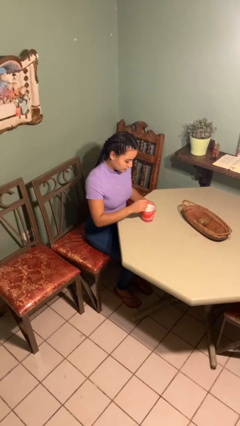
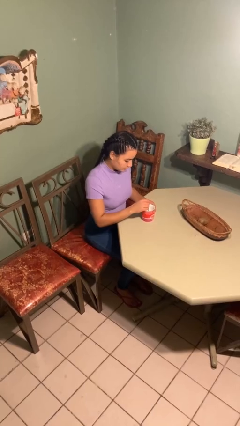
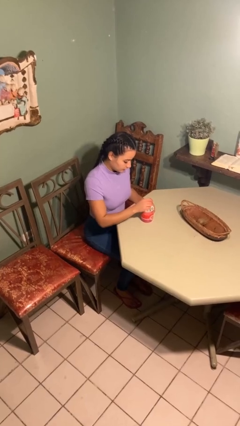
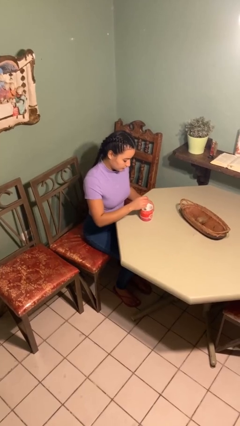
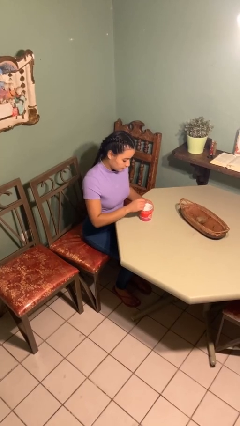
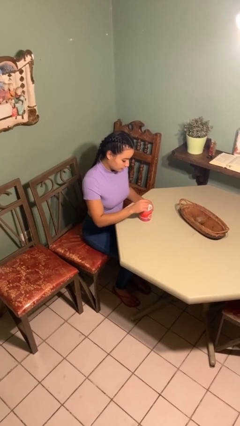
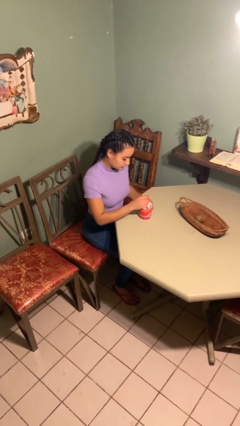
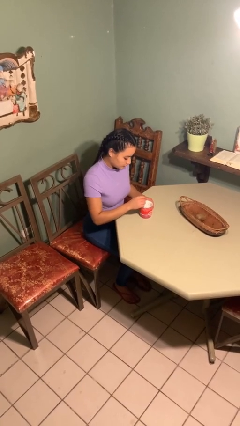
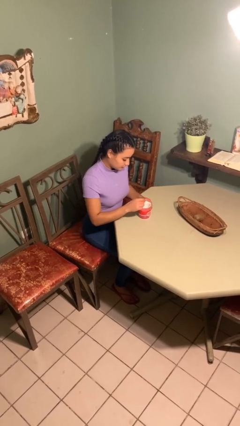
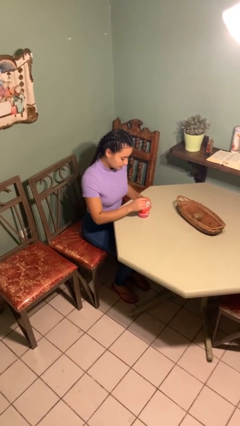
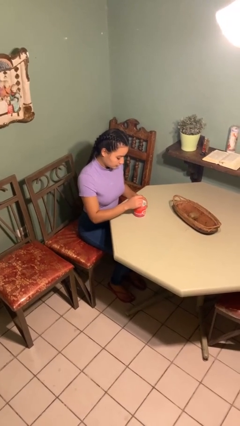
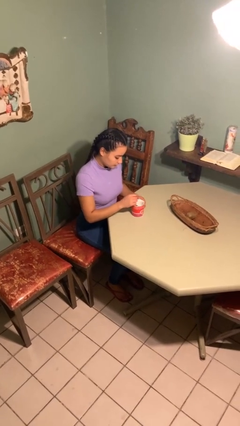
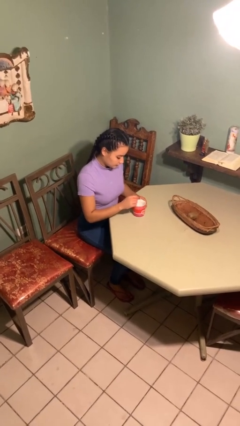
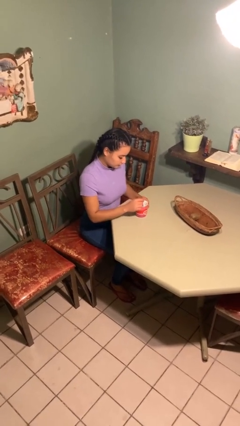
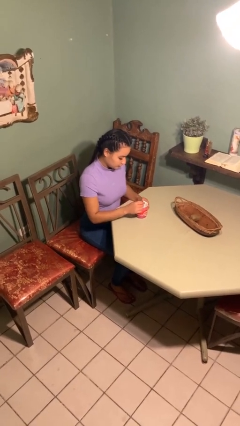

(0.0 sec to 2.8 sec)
person stirs mug

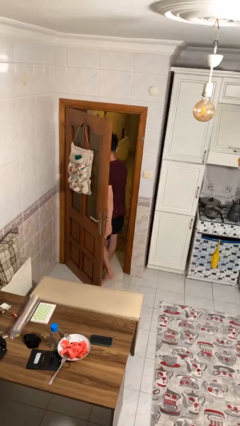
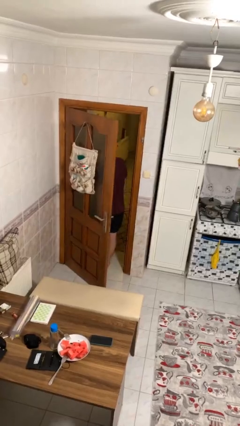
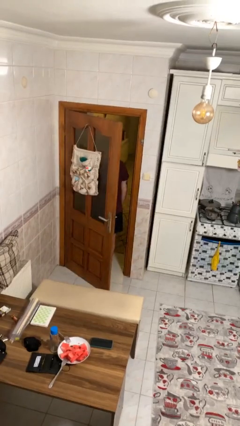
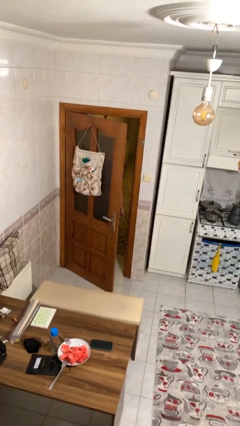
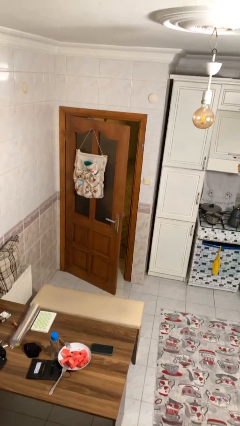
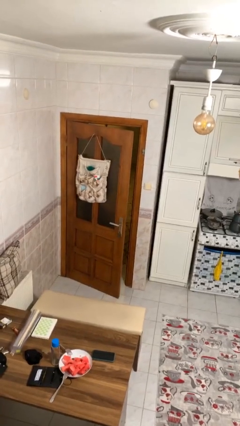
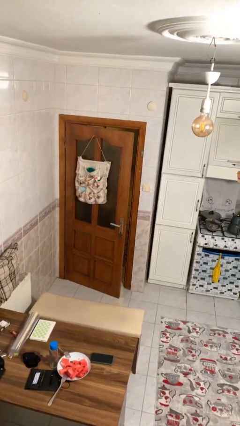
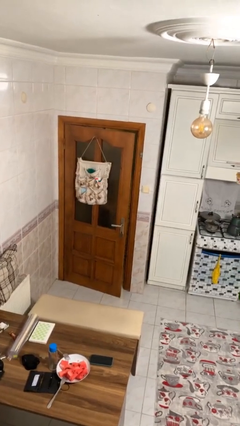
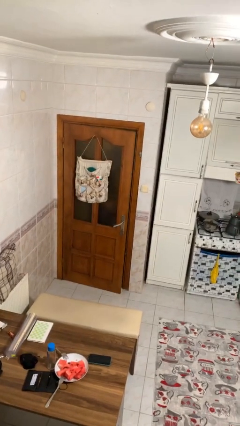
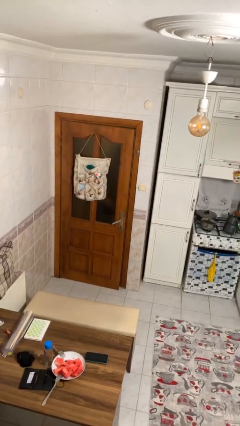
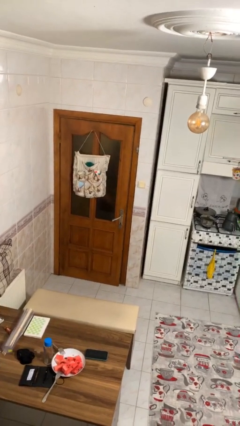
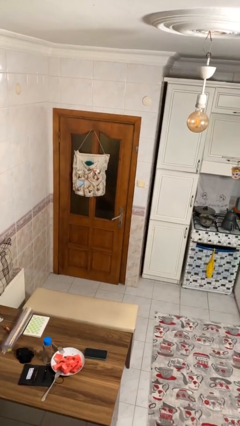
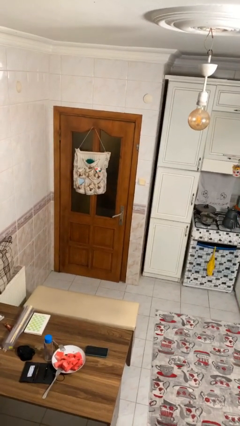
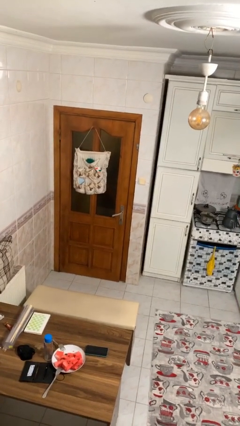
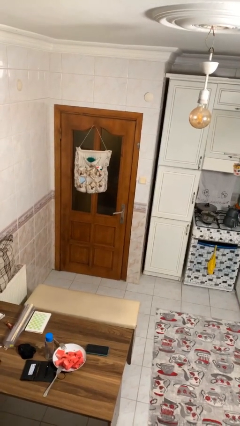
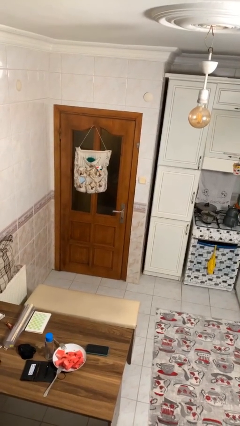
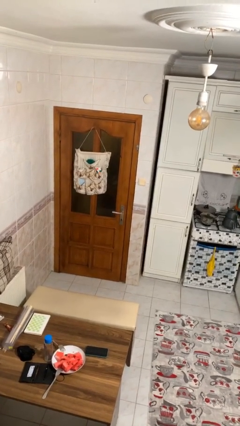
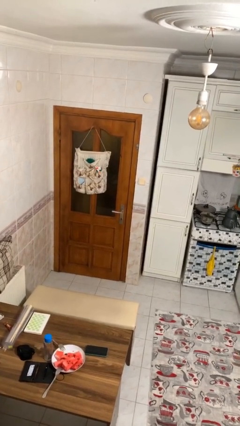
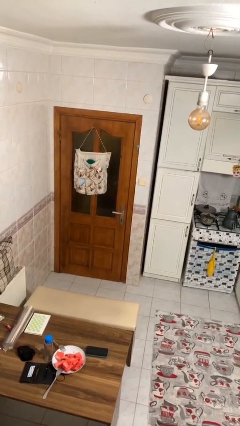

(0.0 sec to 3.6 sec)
person closes facility door

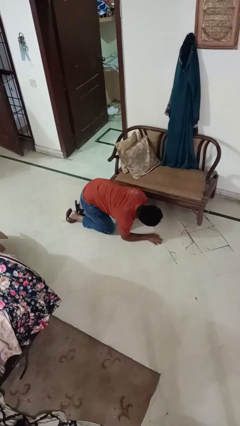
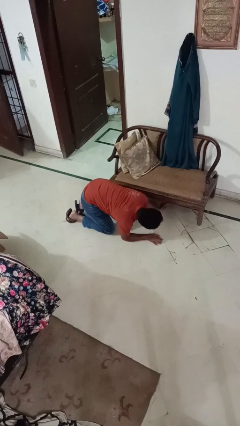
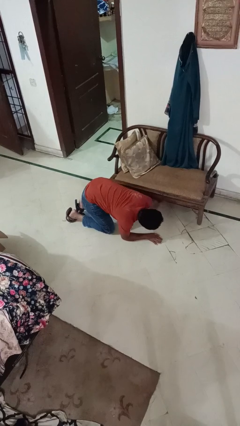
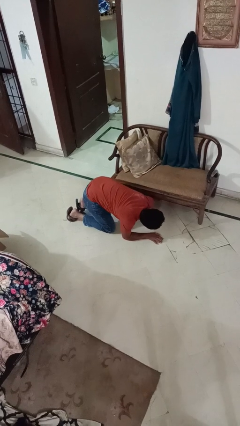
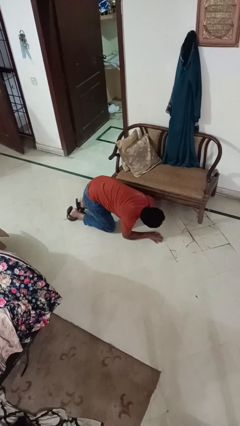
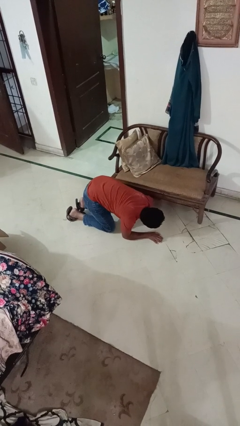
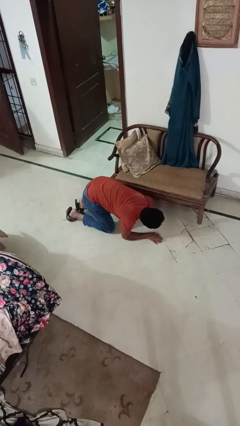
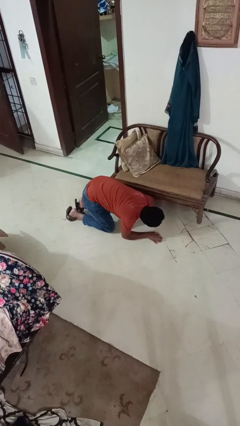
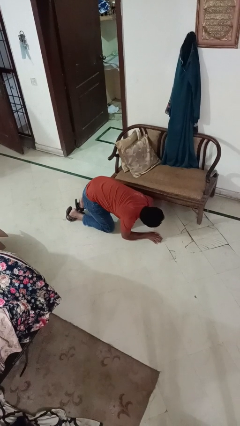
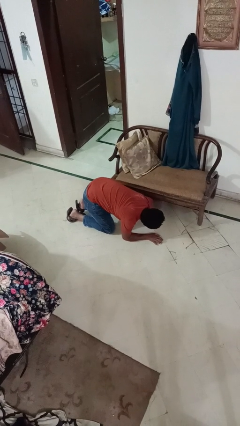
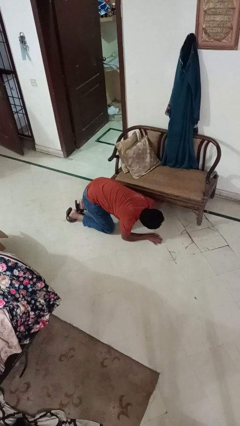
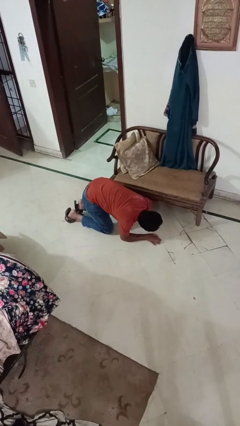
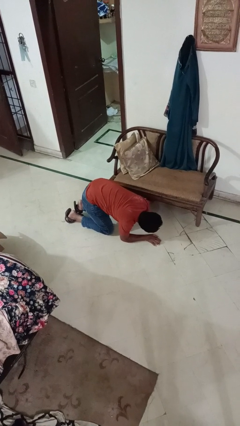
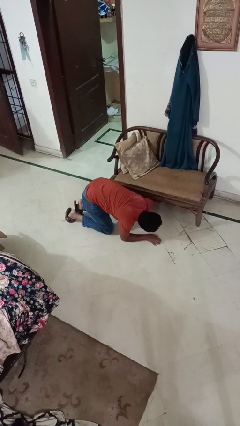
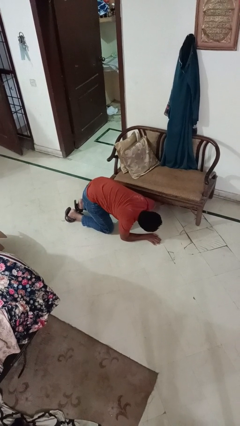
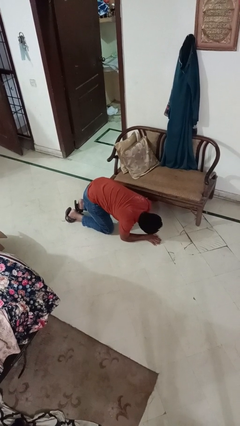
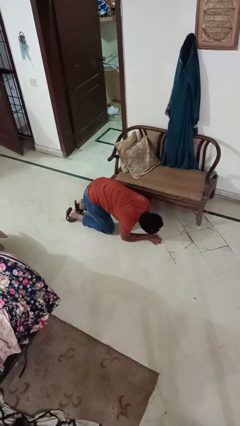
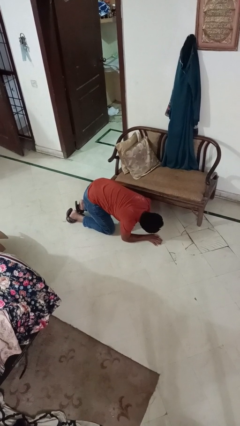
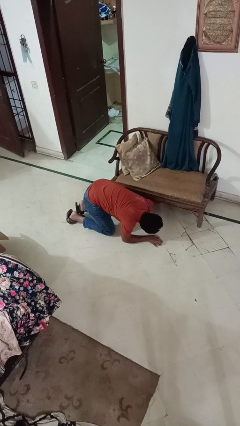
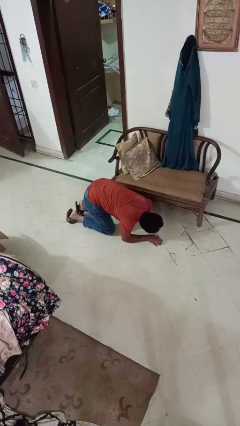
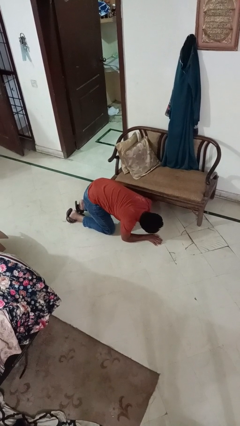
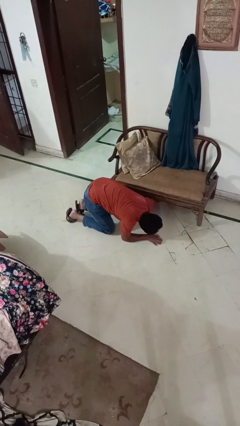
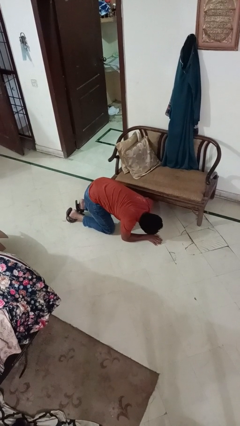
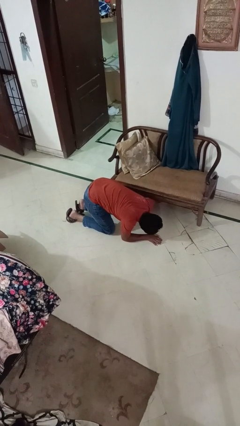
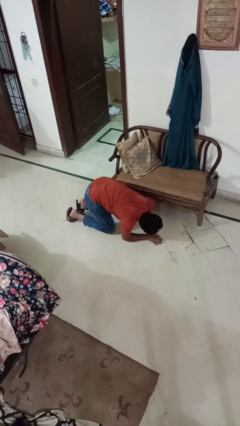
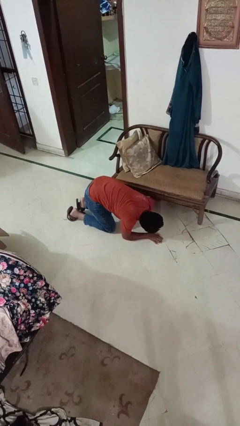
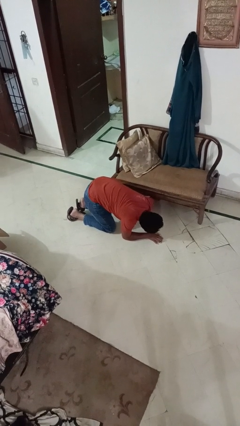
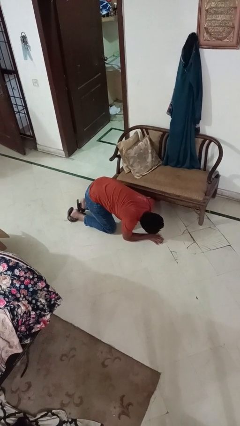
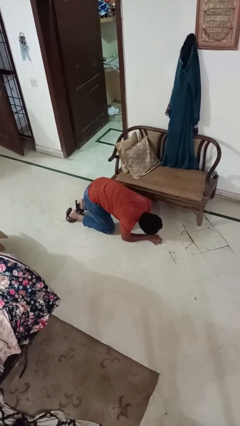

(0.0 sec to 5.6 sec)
person searches under couch

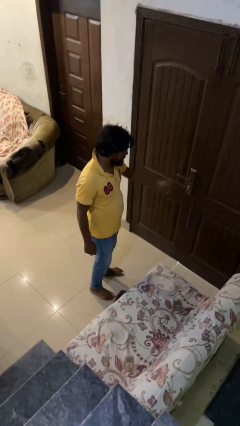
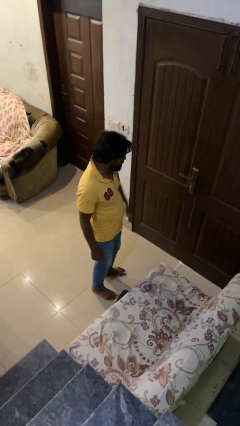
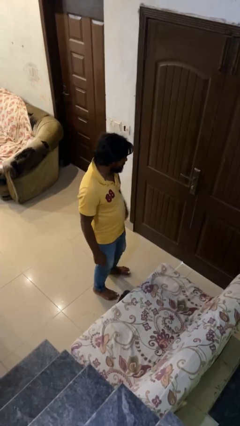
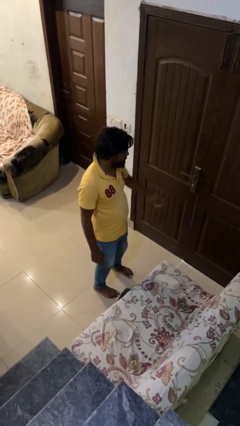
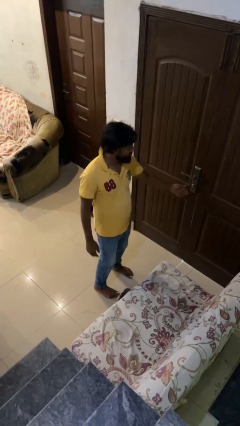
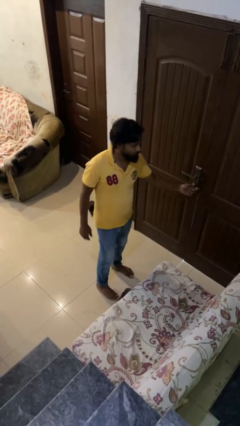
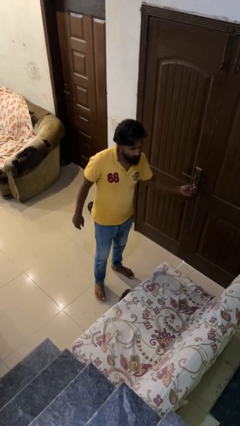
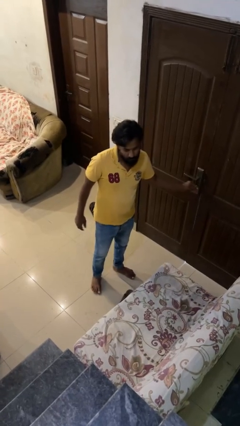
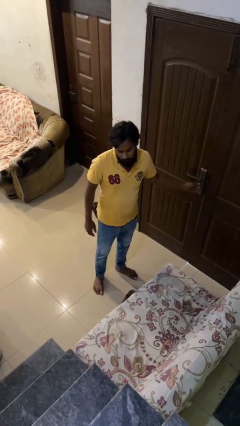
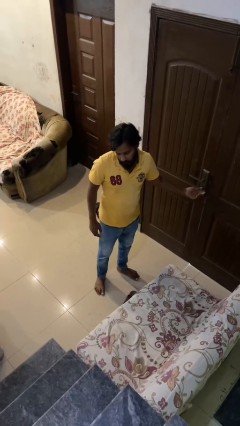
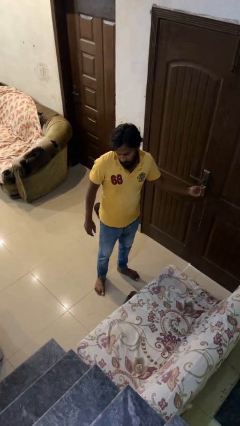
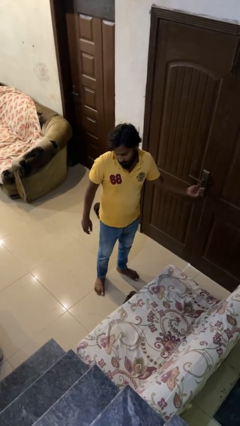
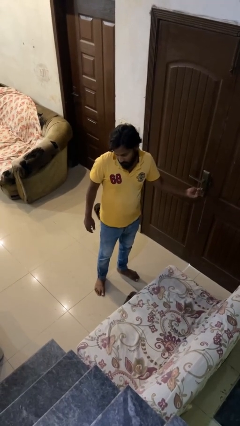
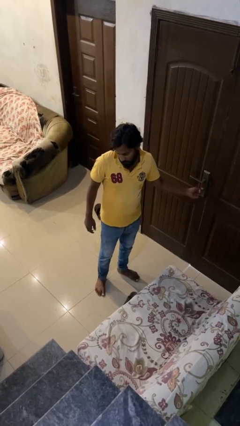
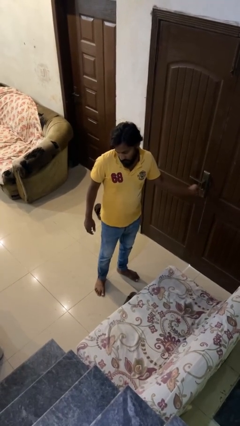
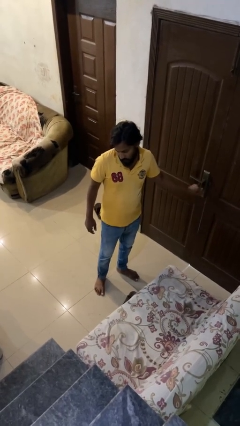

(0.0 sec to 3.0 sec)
person locks door with keys

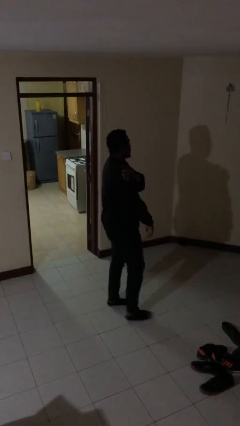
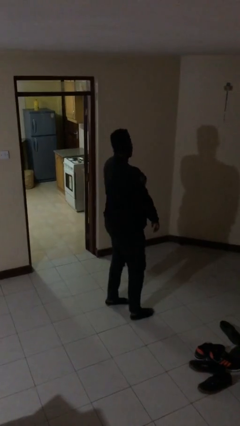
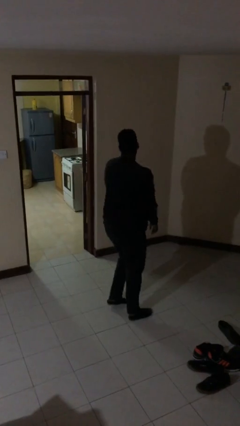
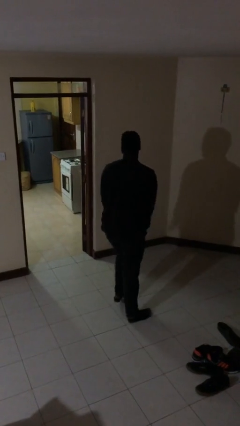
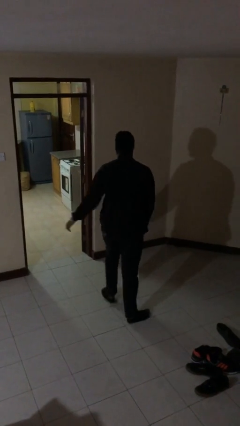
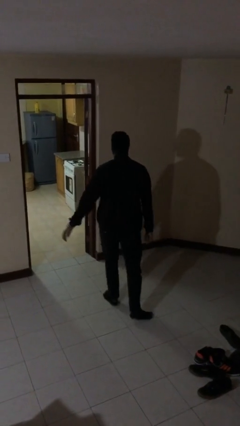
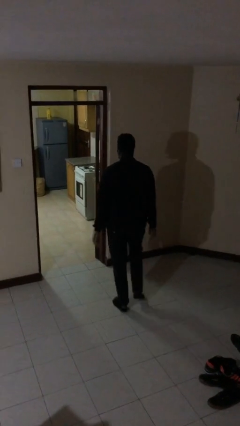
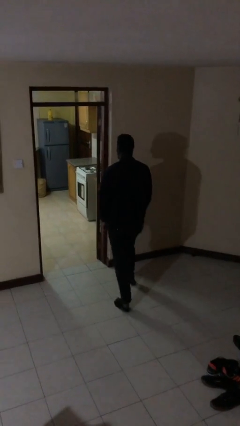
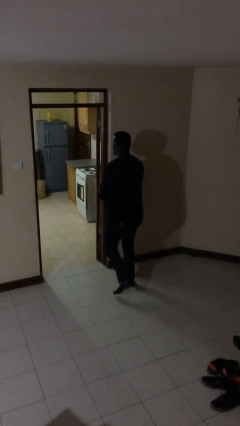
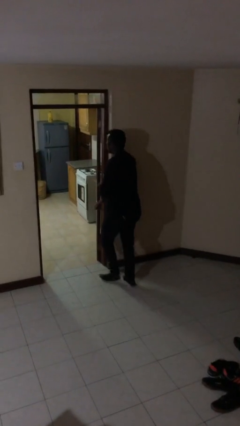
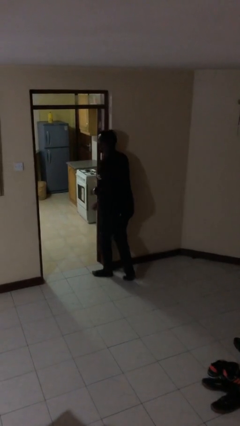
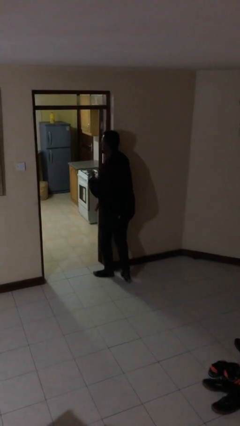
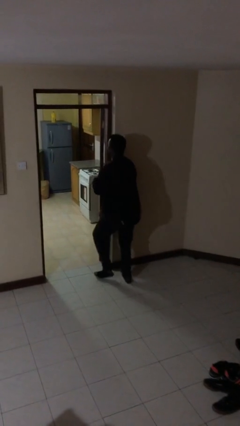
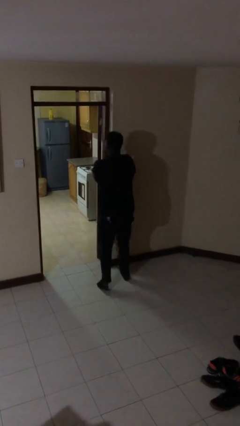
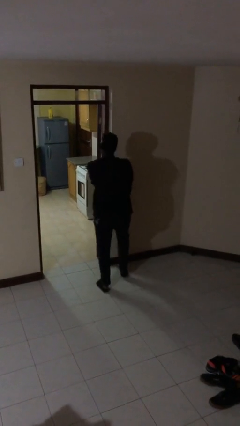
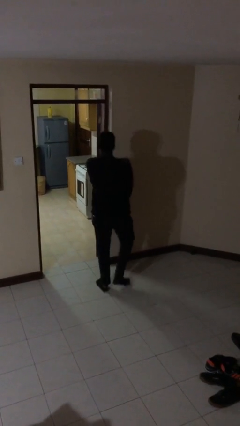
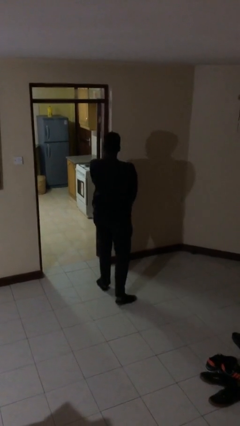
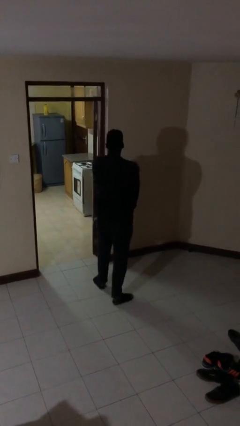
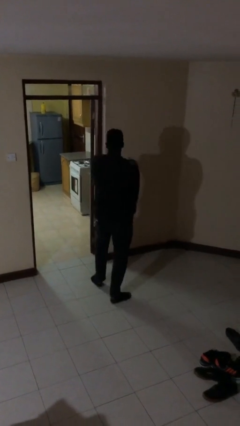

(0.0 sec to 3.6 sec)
person bumps into wall
